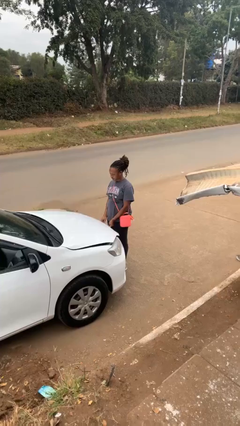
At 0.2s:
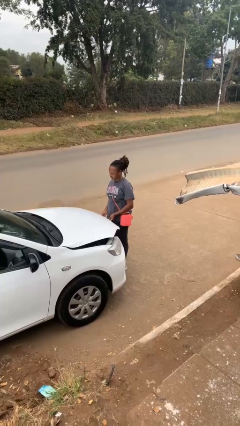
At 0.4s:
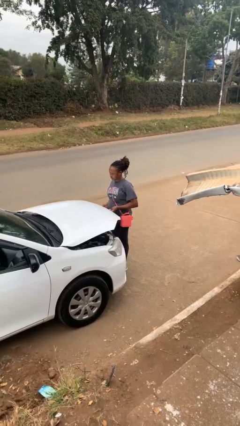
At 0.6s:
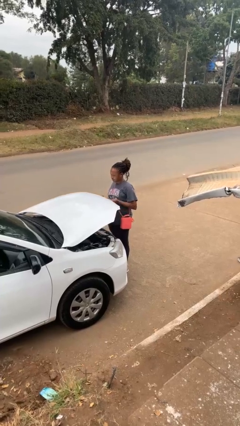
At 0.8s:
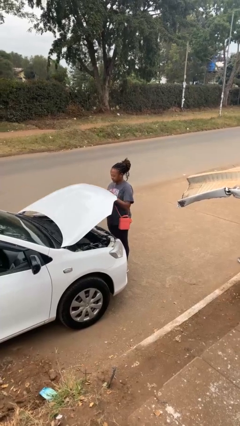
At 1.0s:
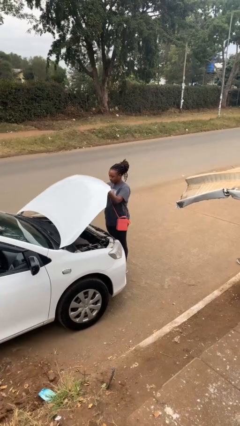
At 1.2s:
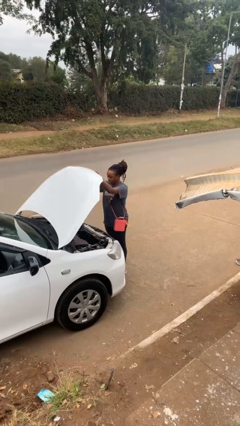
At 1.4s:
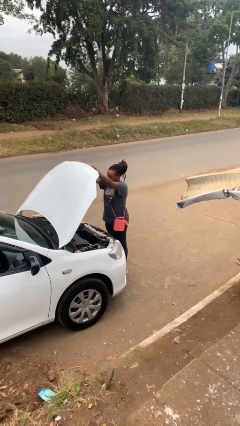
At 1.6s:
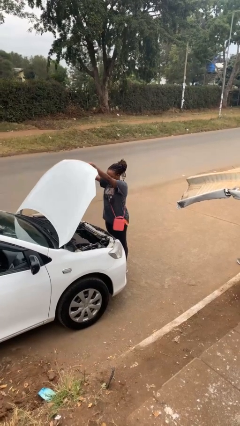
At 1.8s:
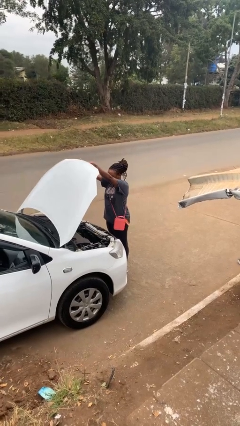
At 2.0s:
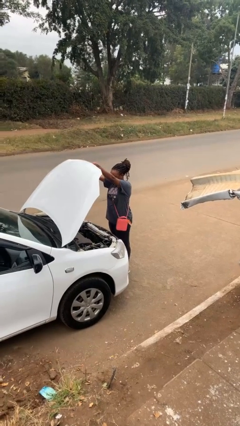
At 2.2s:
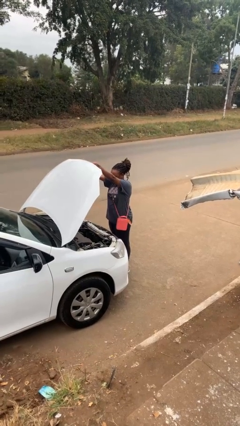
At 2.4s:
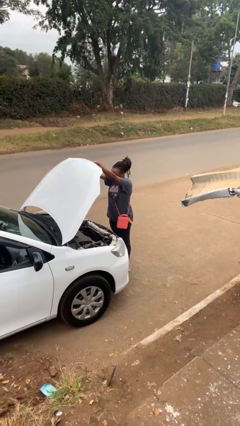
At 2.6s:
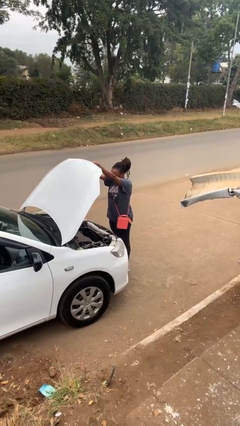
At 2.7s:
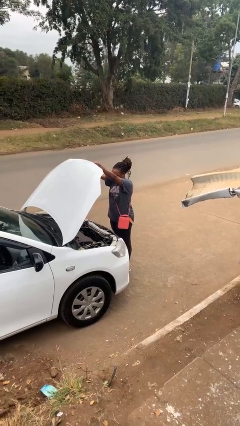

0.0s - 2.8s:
person opens car hood

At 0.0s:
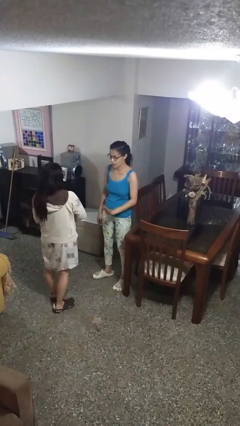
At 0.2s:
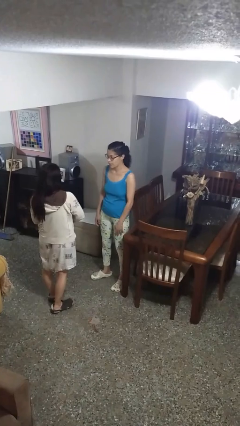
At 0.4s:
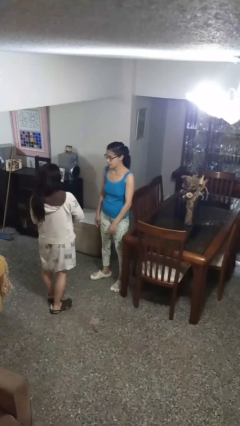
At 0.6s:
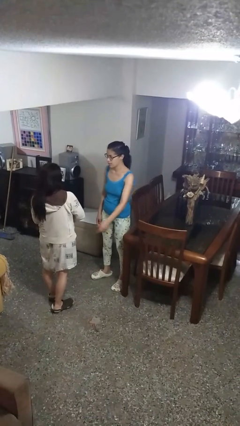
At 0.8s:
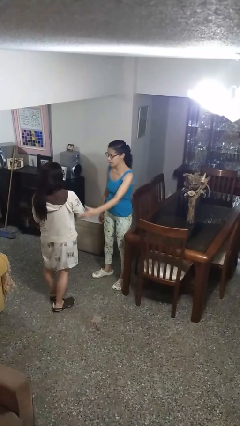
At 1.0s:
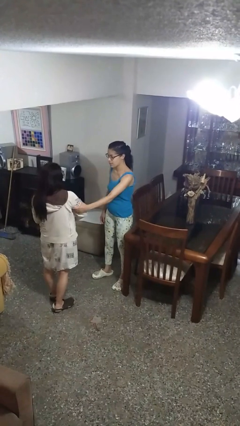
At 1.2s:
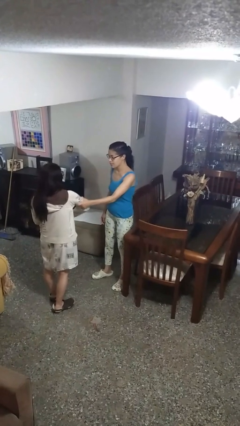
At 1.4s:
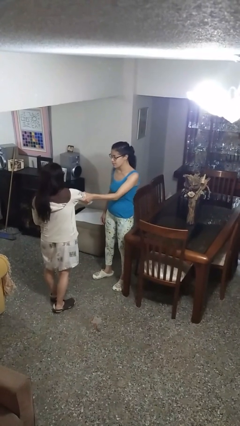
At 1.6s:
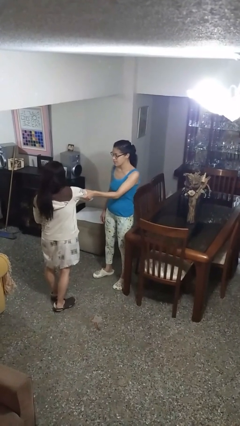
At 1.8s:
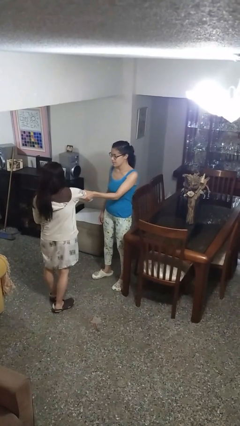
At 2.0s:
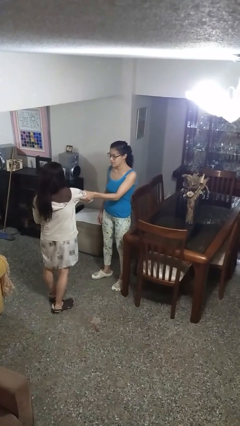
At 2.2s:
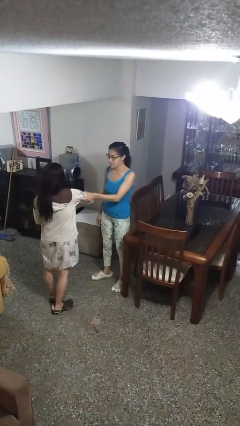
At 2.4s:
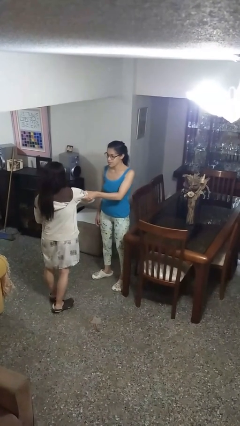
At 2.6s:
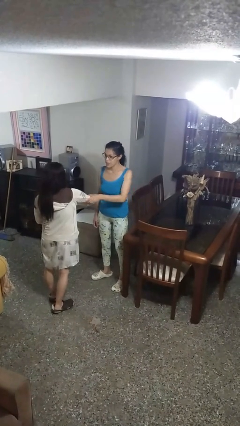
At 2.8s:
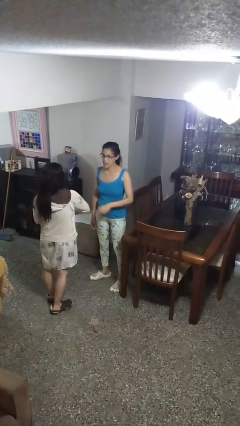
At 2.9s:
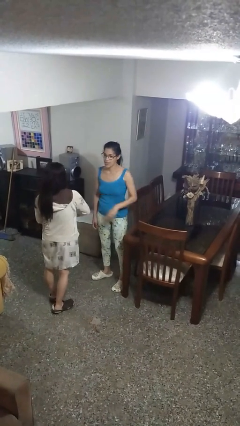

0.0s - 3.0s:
person grabs person by bicep

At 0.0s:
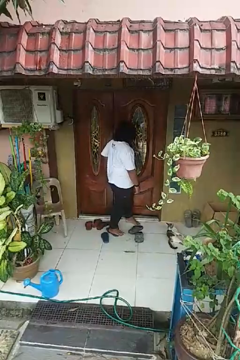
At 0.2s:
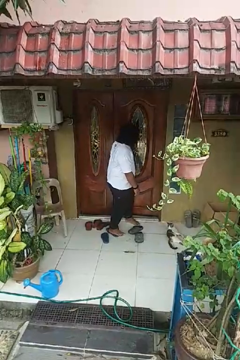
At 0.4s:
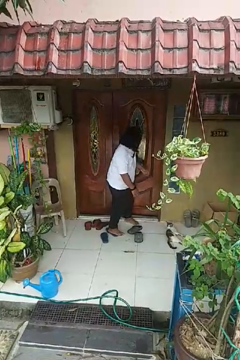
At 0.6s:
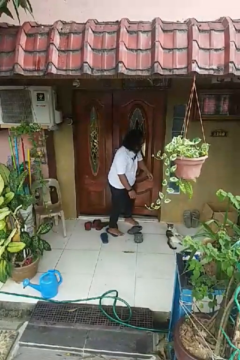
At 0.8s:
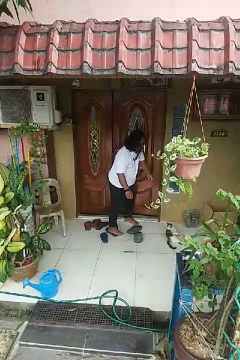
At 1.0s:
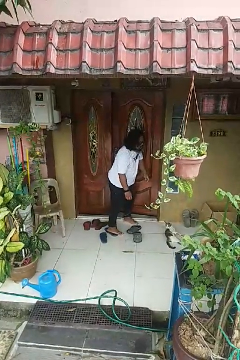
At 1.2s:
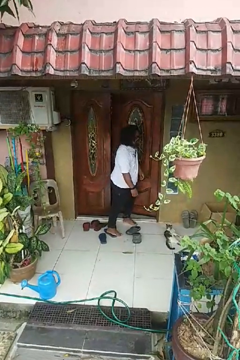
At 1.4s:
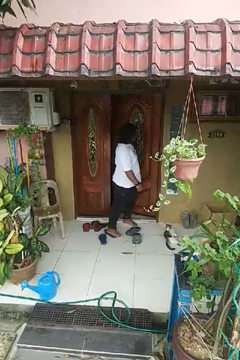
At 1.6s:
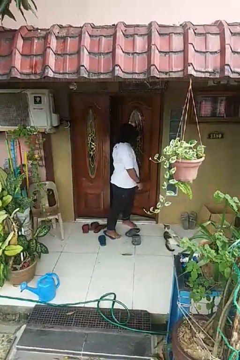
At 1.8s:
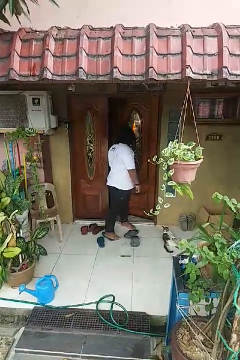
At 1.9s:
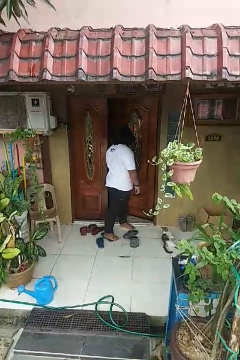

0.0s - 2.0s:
person opens facility door

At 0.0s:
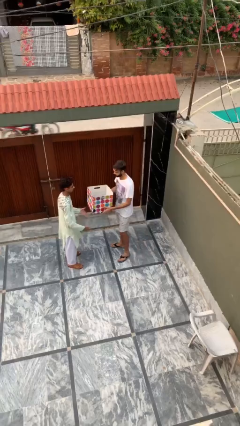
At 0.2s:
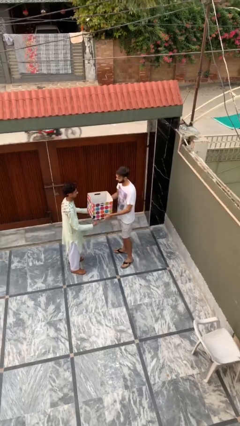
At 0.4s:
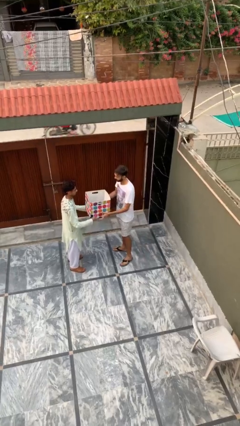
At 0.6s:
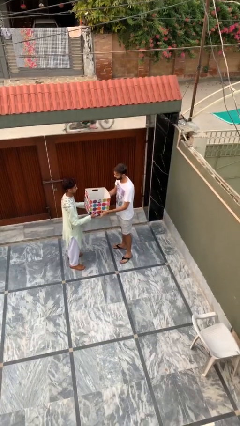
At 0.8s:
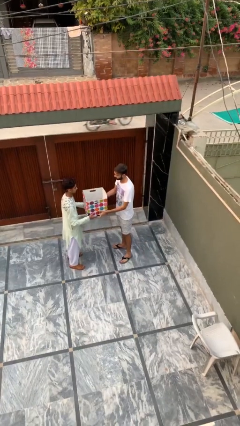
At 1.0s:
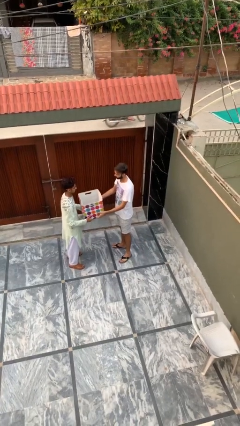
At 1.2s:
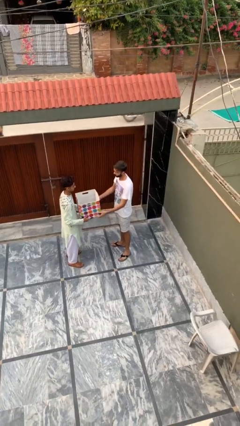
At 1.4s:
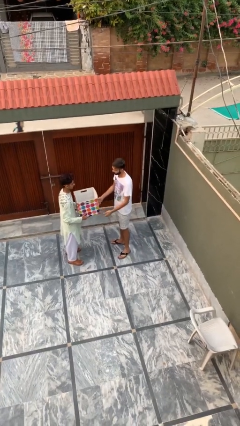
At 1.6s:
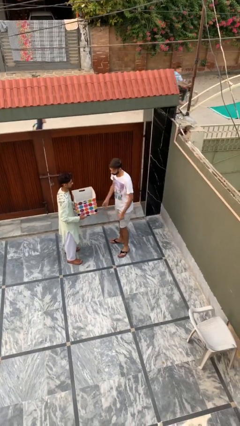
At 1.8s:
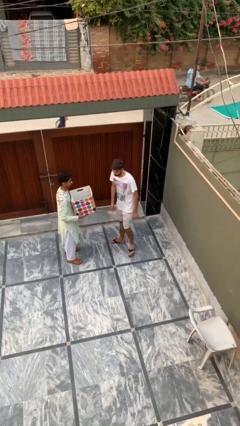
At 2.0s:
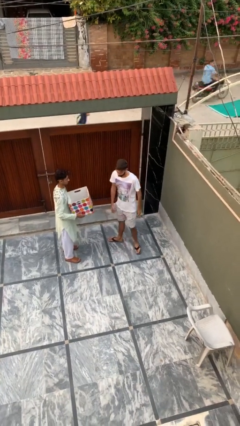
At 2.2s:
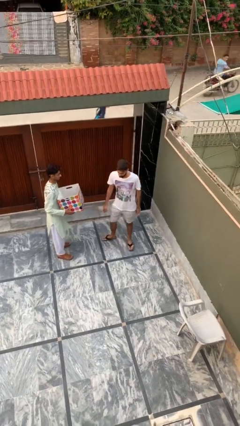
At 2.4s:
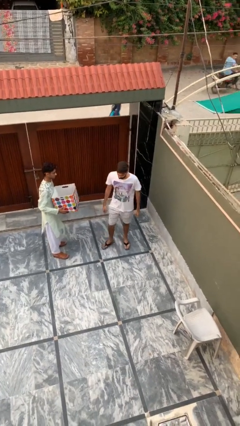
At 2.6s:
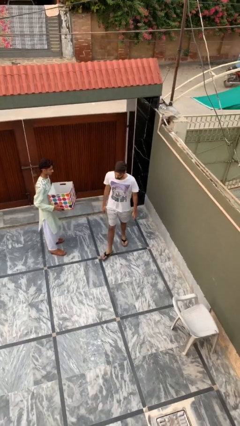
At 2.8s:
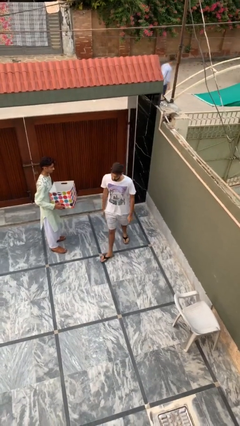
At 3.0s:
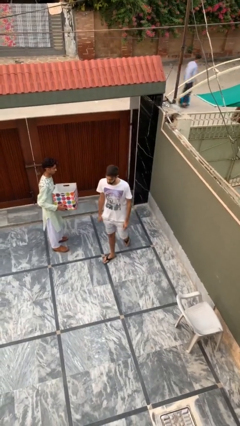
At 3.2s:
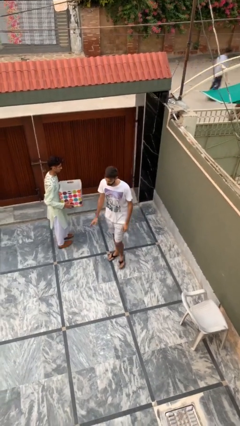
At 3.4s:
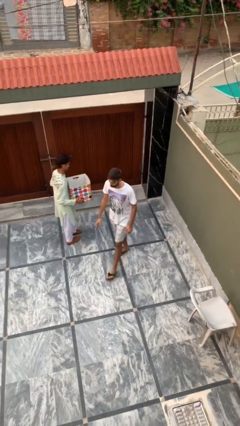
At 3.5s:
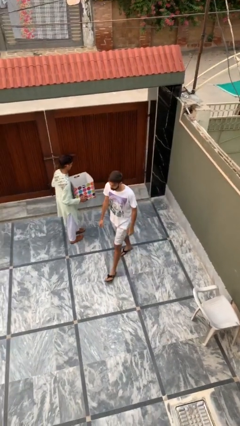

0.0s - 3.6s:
person transfers object to person

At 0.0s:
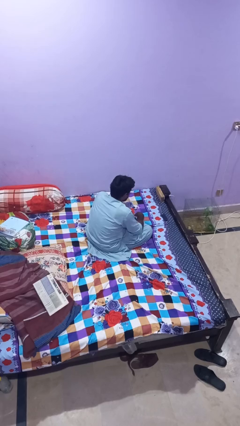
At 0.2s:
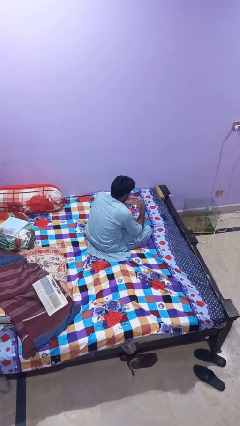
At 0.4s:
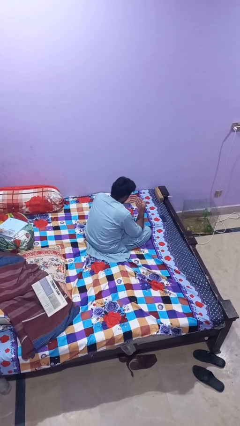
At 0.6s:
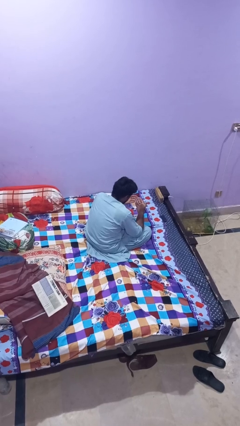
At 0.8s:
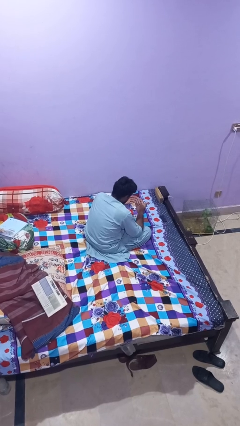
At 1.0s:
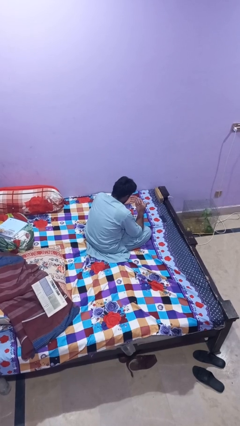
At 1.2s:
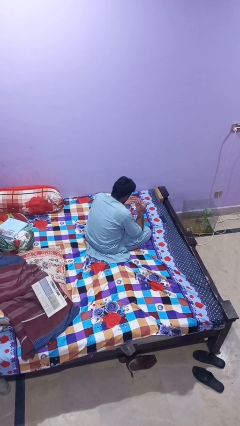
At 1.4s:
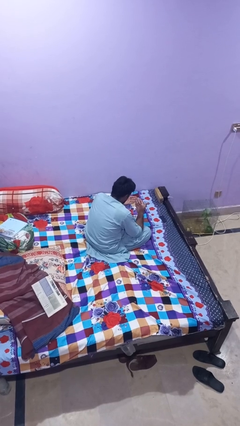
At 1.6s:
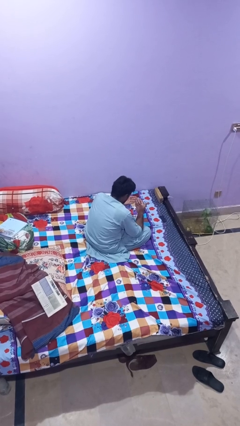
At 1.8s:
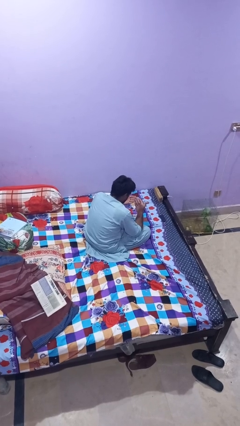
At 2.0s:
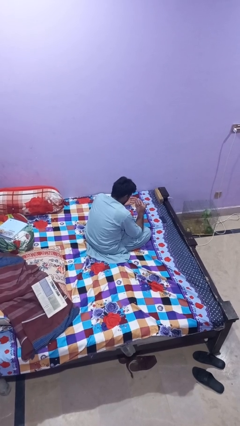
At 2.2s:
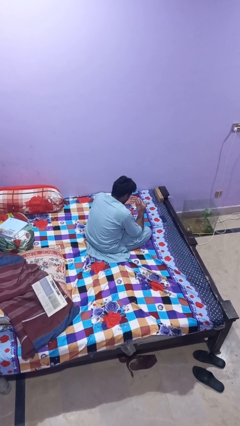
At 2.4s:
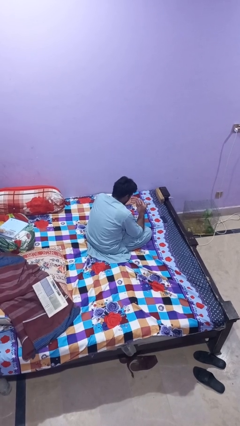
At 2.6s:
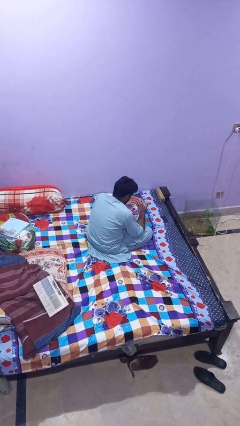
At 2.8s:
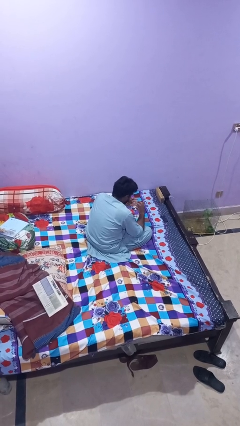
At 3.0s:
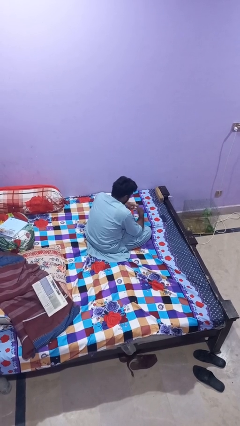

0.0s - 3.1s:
person looks at hands in lap

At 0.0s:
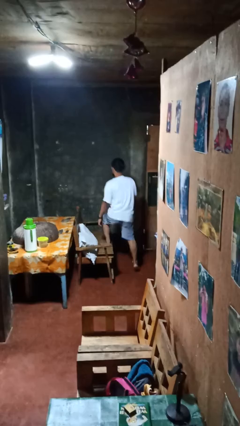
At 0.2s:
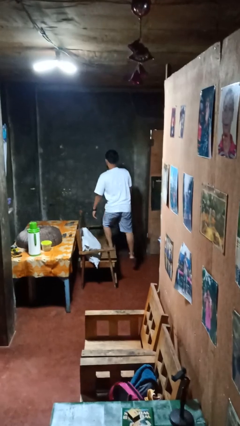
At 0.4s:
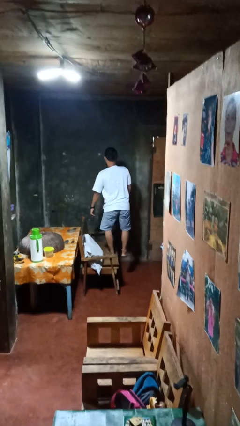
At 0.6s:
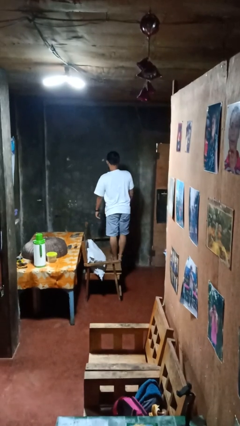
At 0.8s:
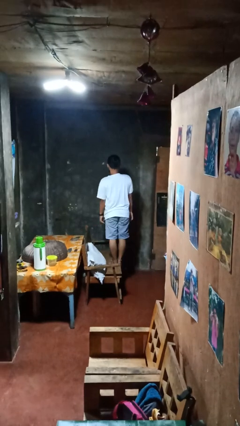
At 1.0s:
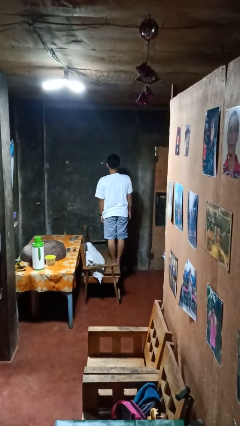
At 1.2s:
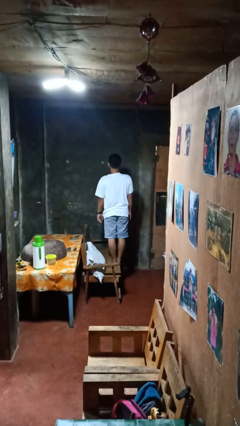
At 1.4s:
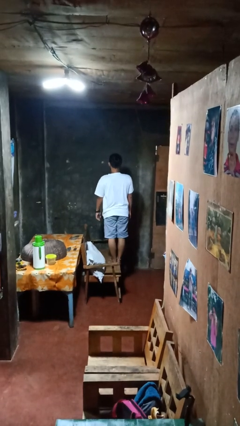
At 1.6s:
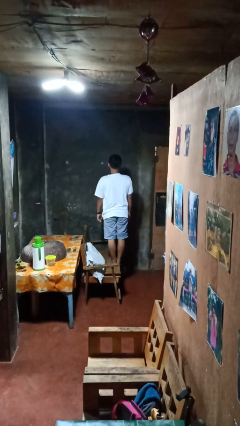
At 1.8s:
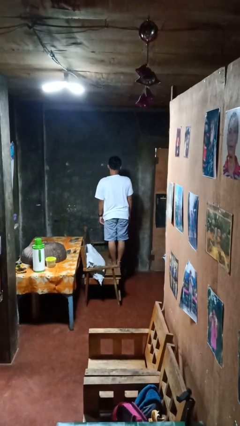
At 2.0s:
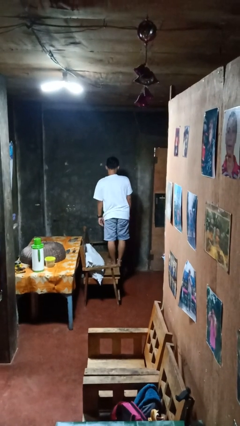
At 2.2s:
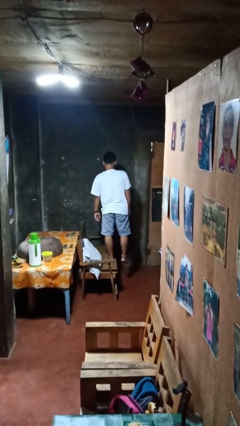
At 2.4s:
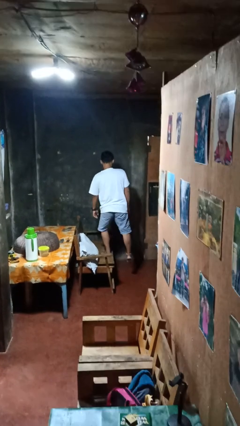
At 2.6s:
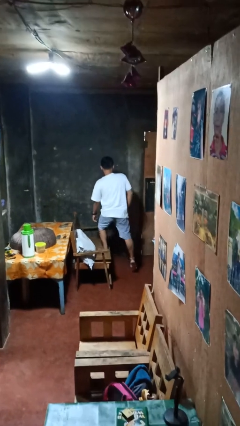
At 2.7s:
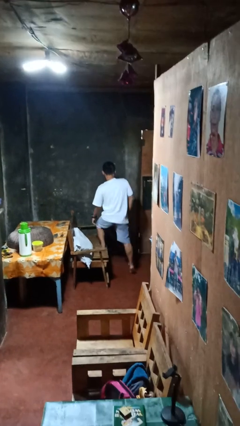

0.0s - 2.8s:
person climbs on couch

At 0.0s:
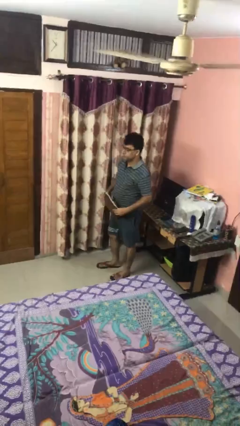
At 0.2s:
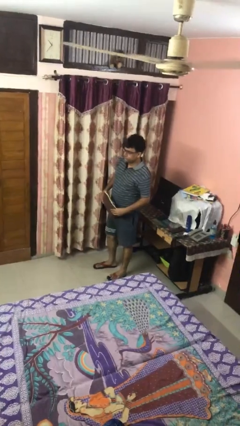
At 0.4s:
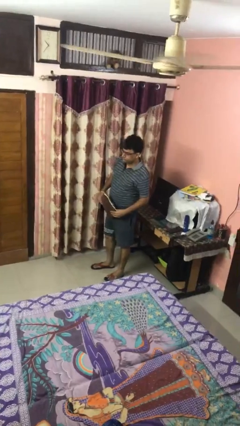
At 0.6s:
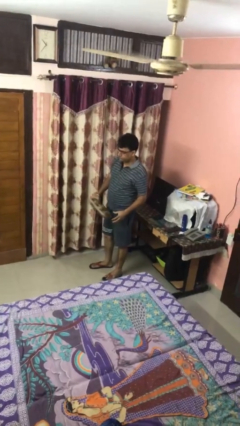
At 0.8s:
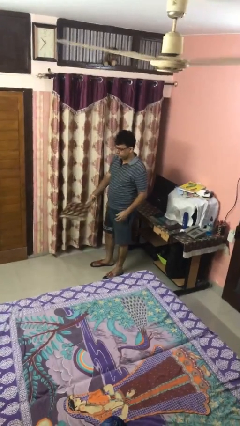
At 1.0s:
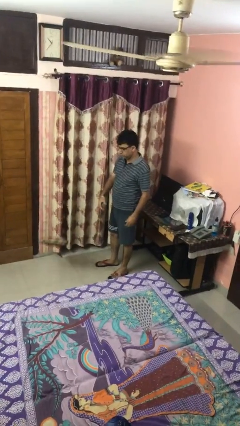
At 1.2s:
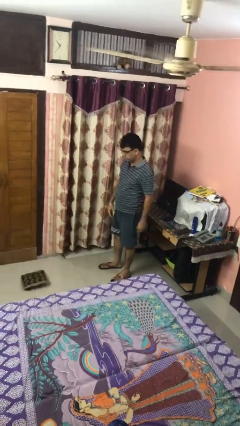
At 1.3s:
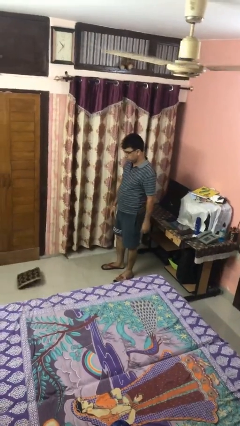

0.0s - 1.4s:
person throws object to ground
